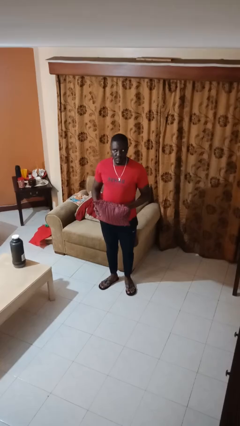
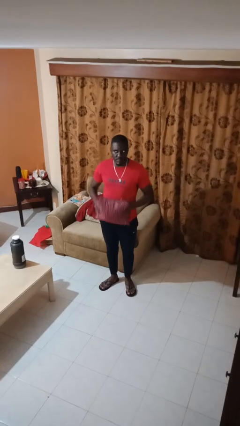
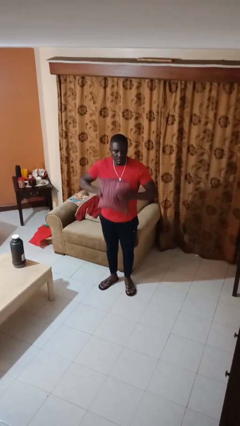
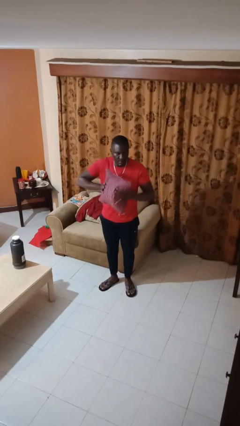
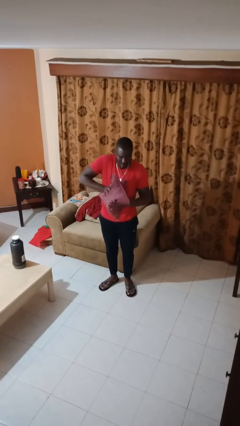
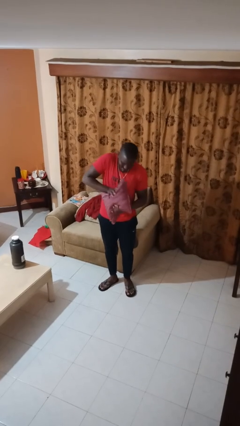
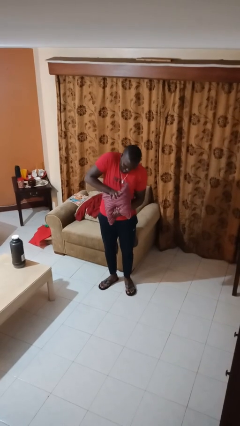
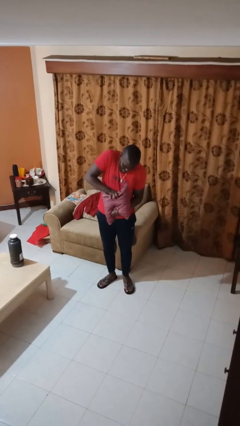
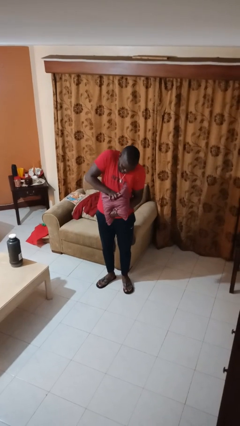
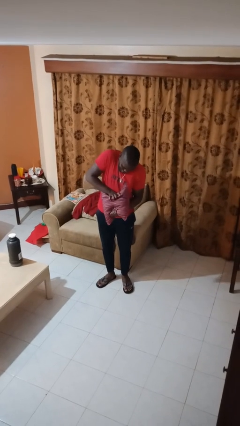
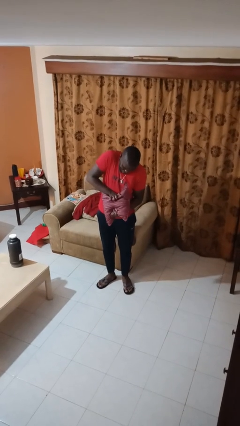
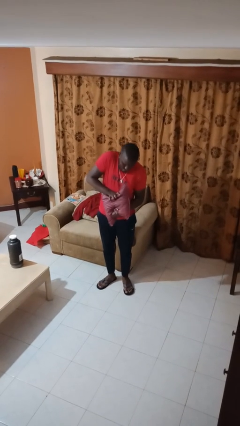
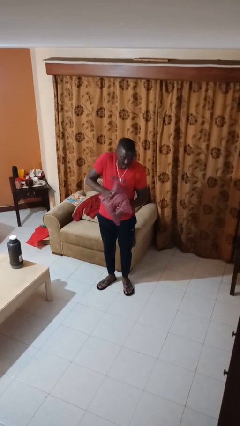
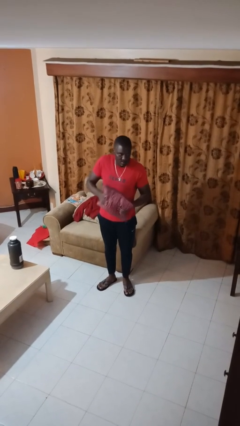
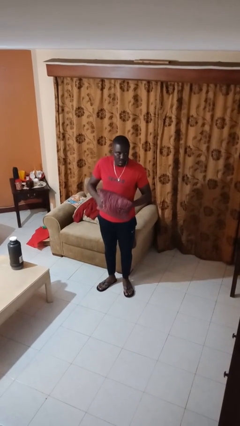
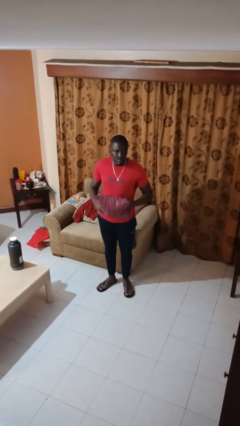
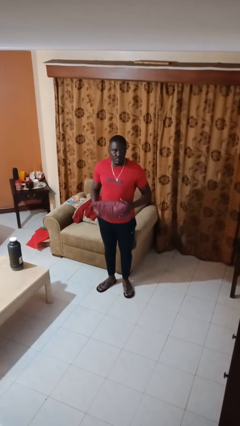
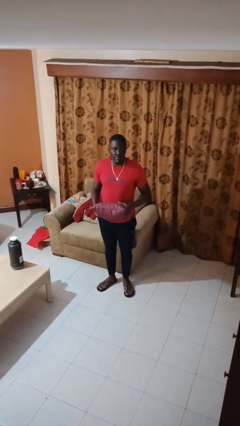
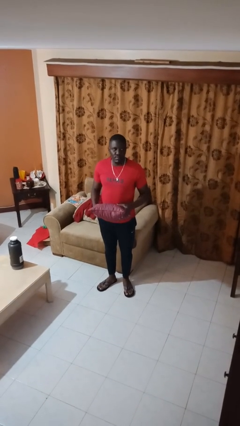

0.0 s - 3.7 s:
person squeezes object

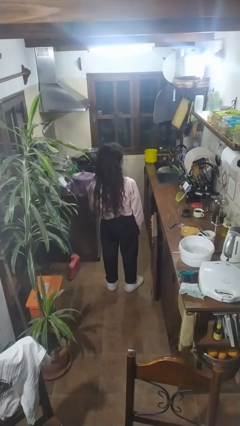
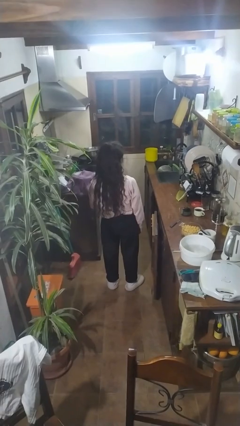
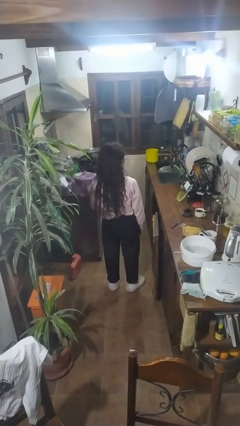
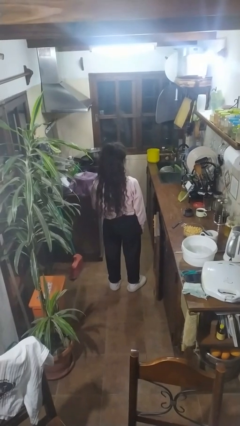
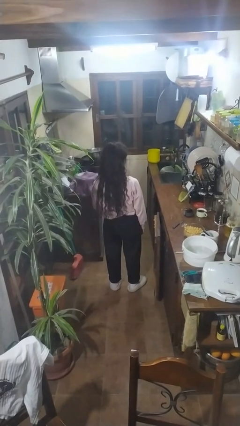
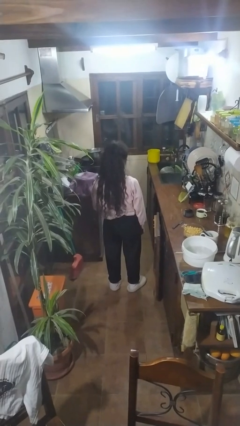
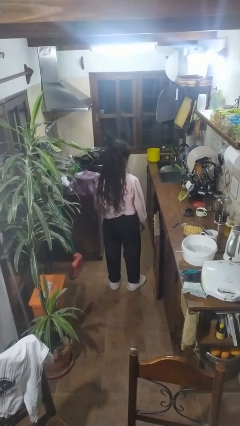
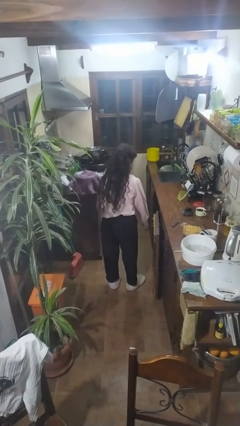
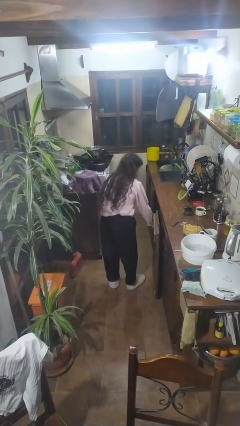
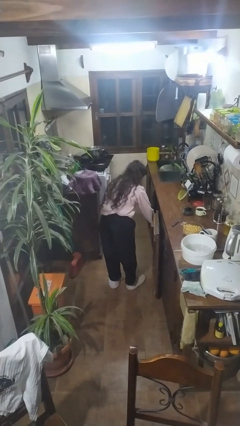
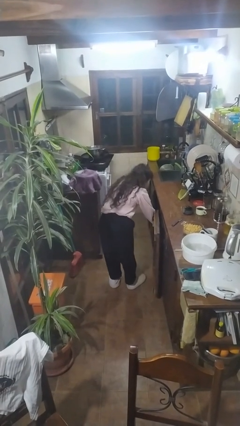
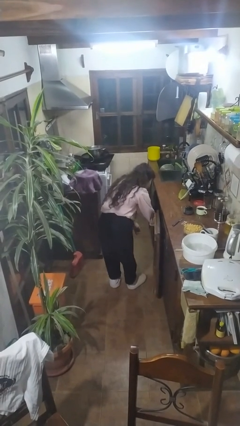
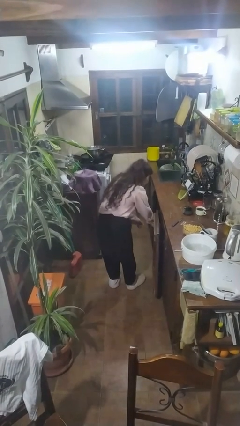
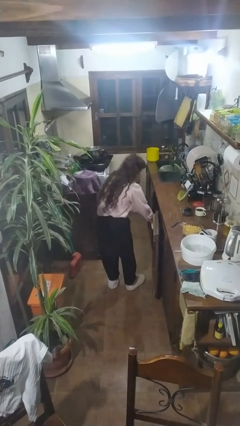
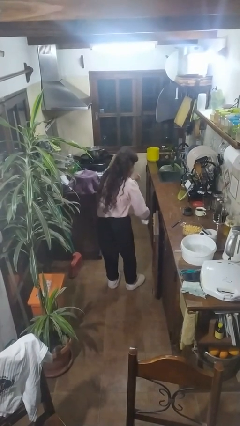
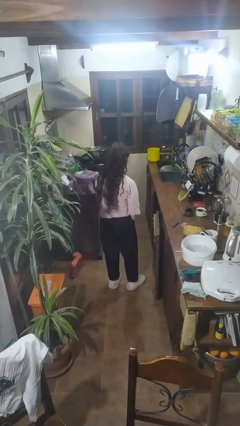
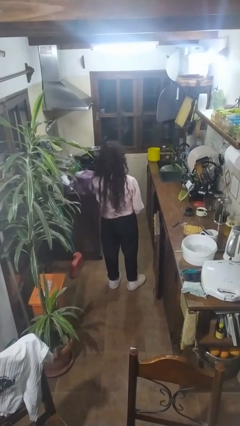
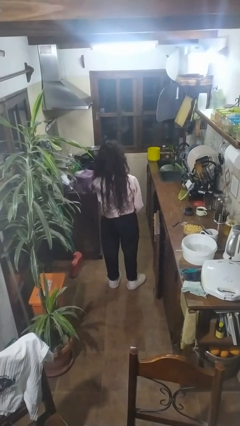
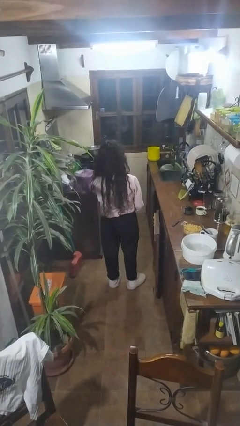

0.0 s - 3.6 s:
person takes object from cabinet

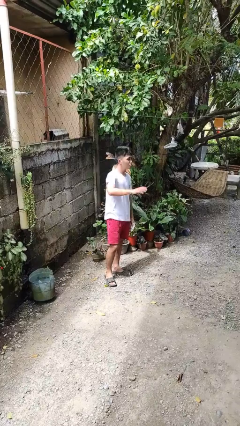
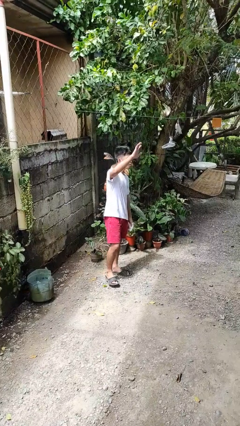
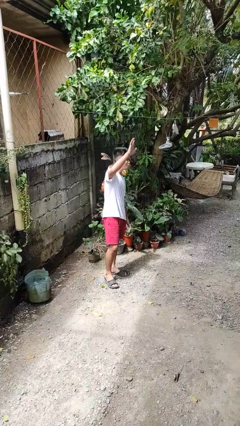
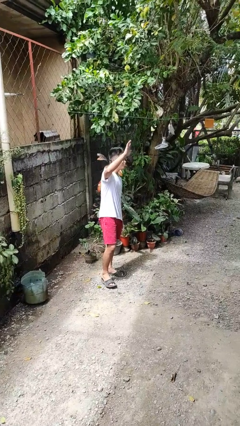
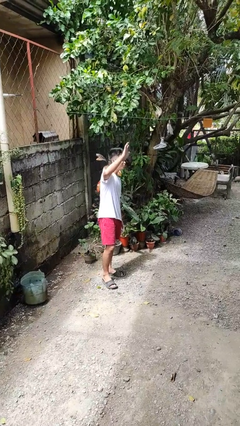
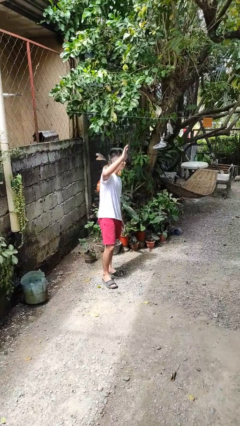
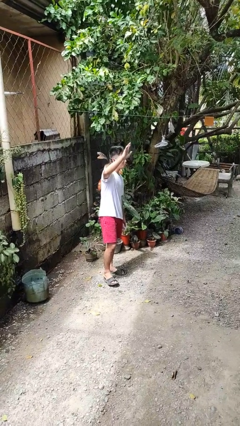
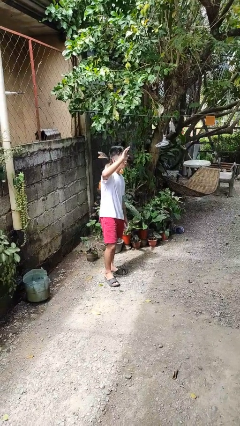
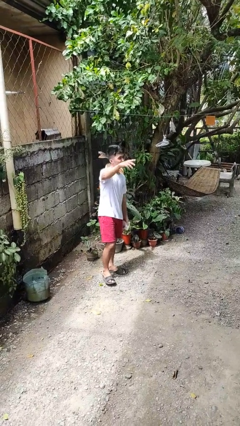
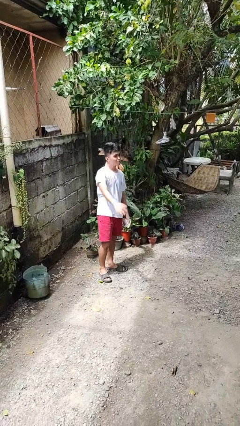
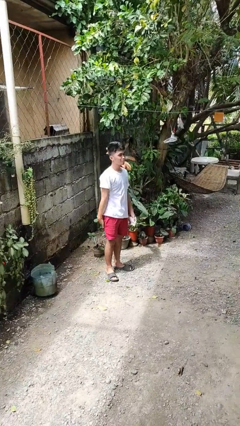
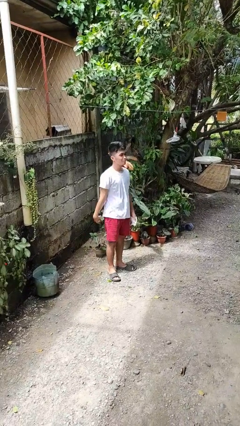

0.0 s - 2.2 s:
person waves at person

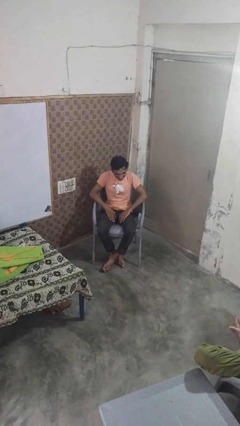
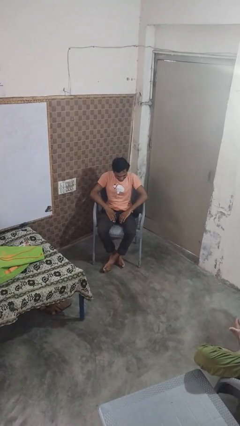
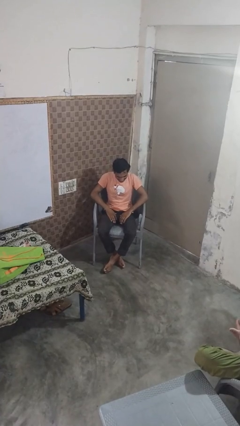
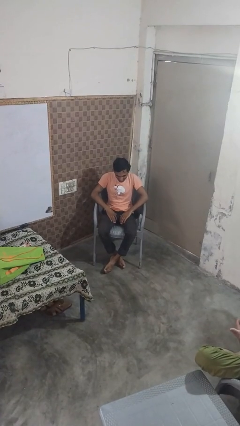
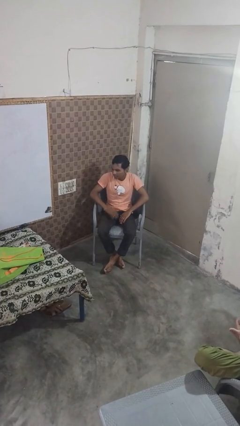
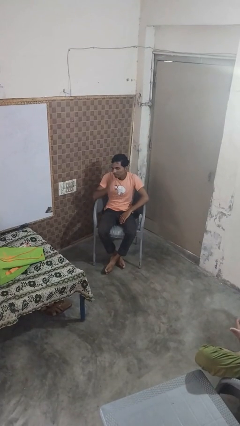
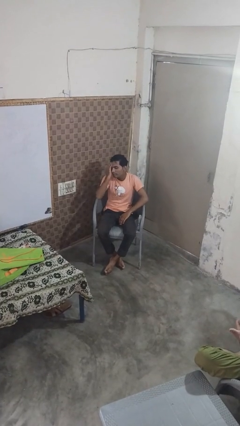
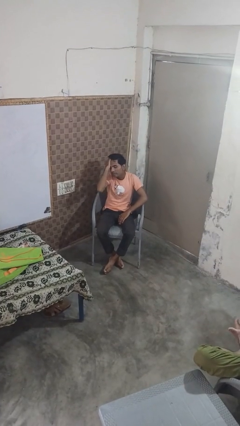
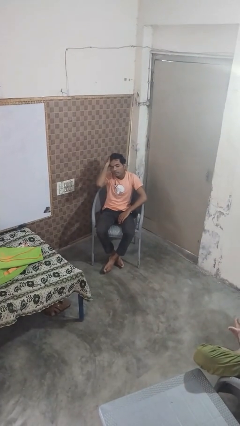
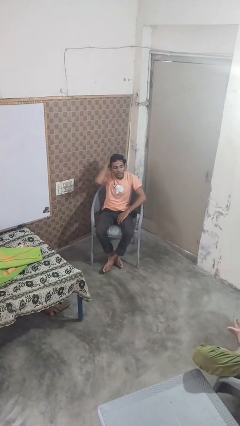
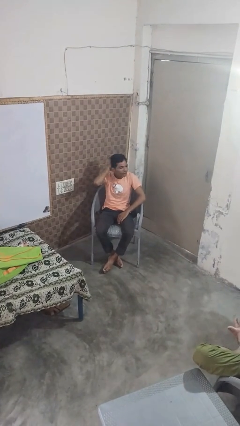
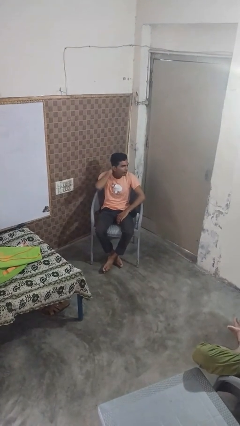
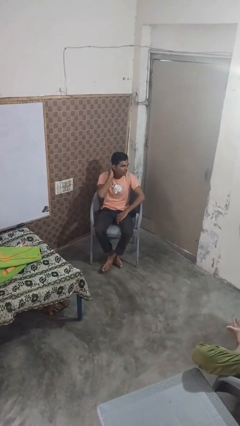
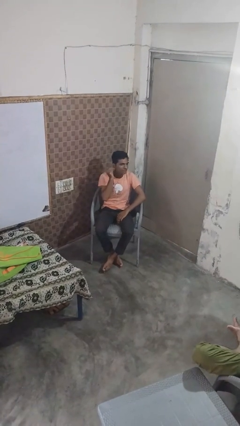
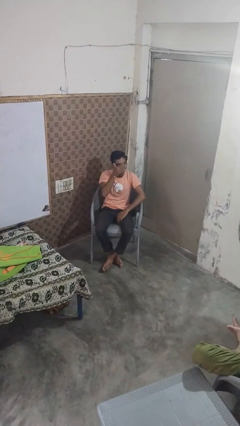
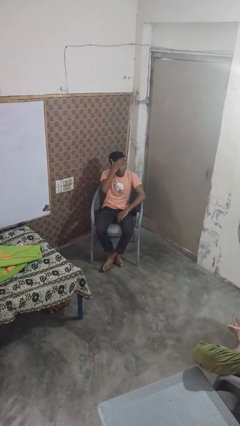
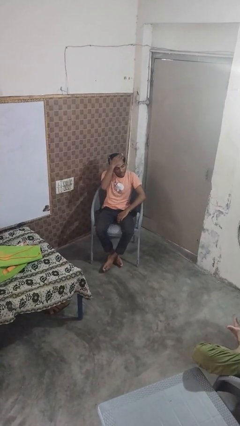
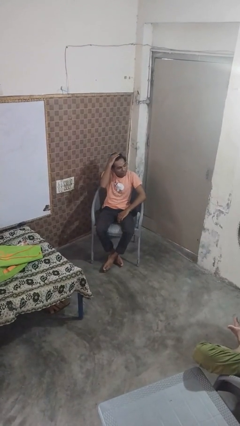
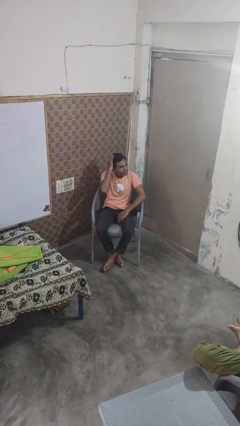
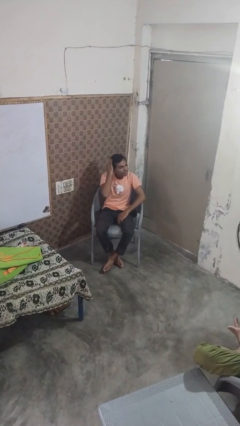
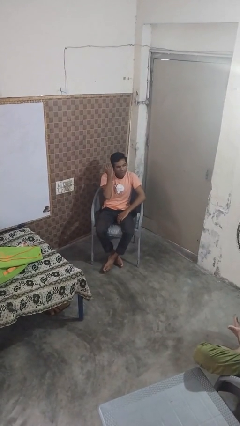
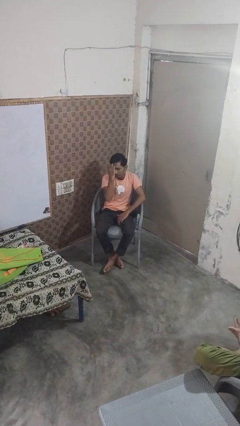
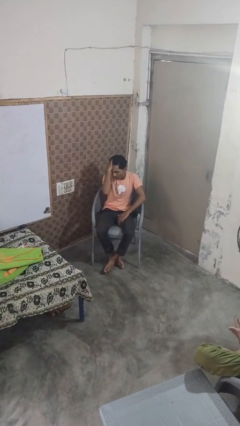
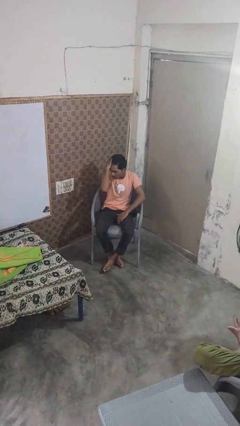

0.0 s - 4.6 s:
person strokes hair

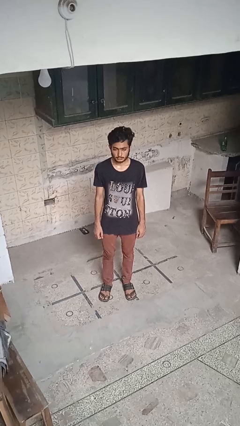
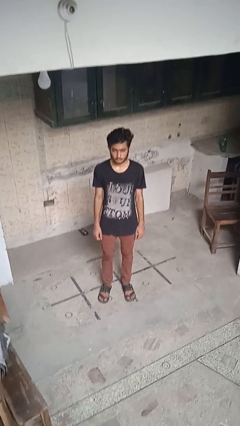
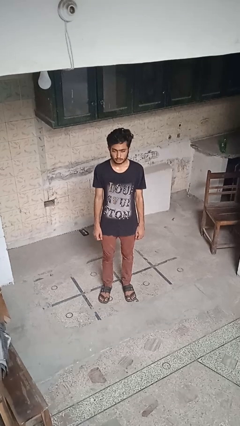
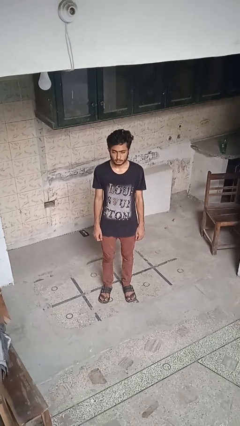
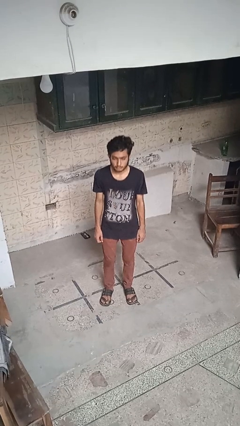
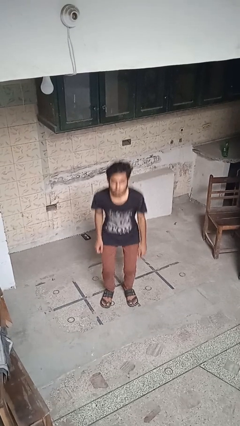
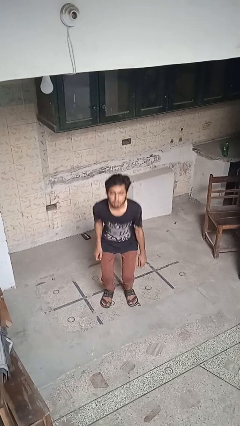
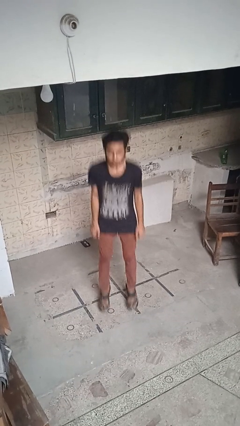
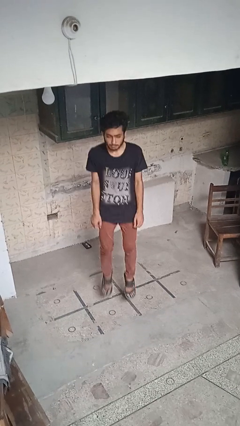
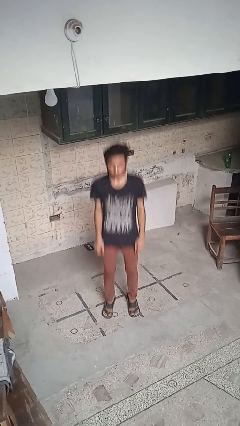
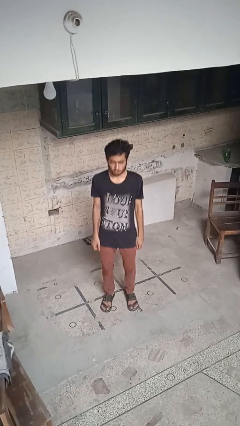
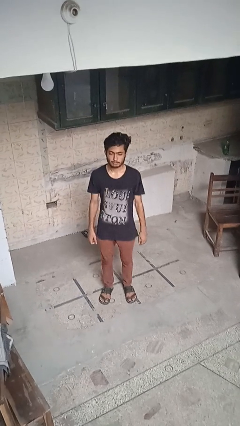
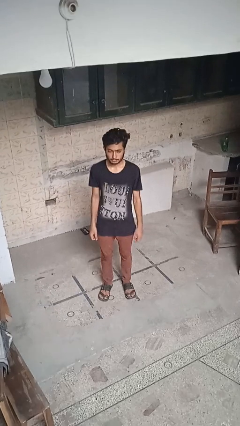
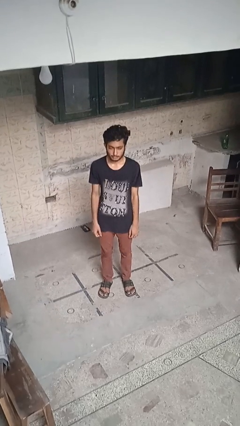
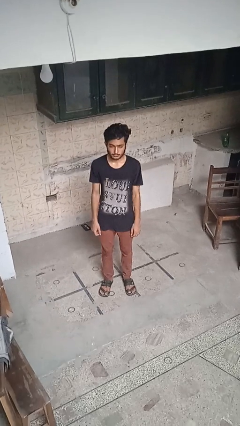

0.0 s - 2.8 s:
person jumps

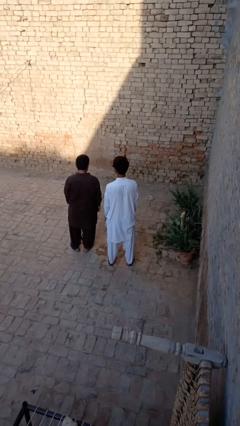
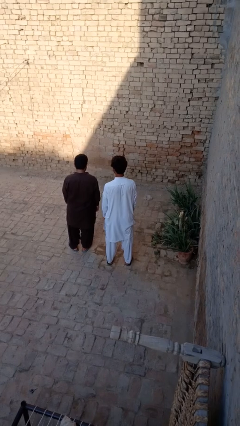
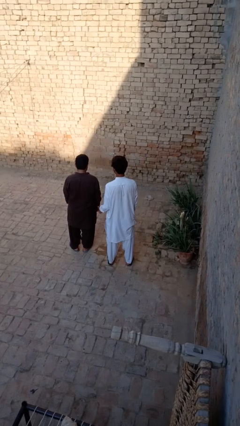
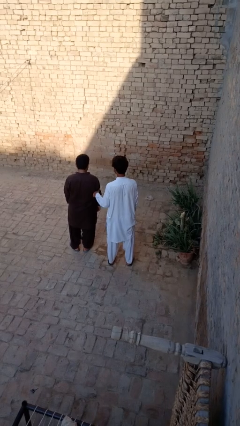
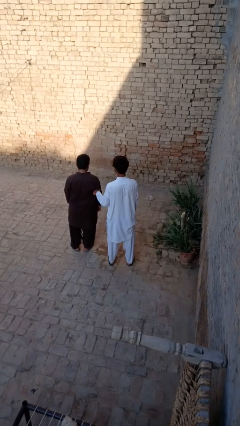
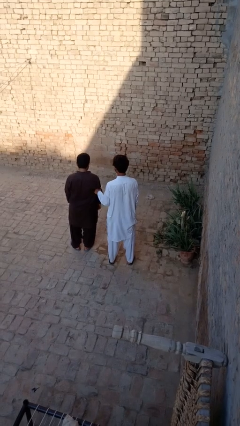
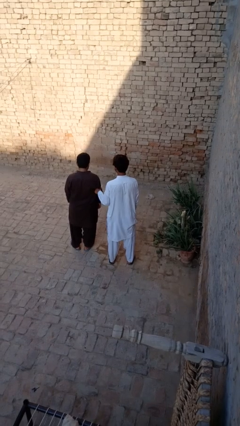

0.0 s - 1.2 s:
person tickles person
